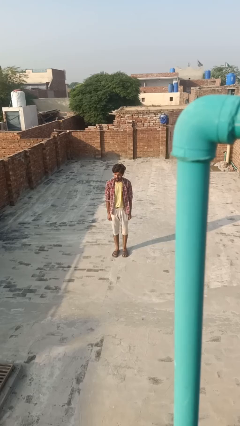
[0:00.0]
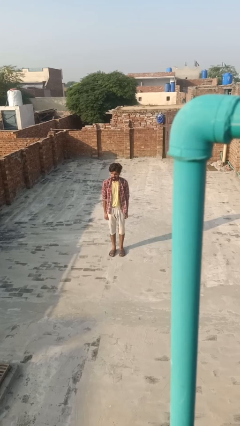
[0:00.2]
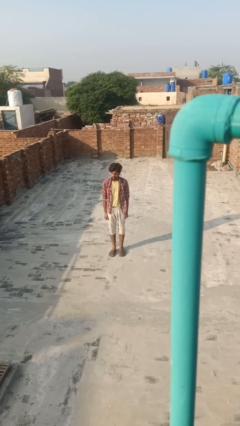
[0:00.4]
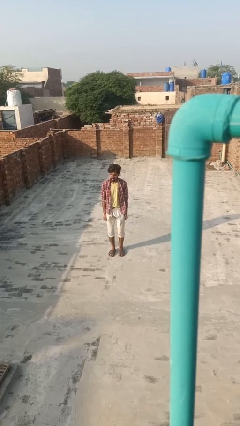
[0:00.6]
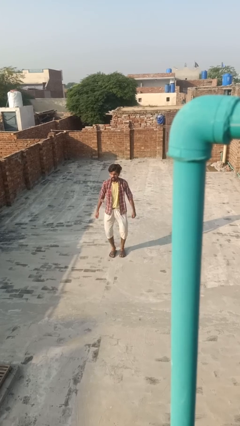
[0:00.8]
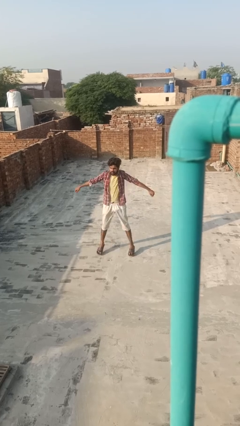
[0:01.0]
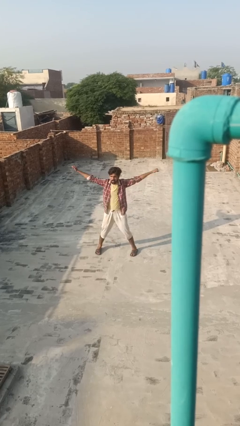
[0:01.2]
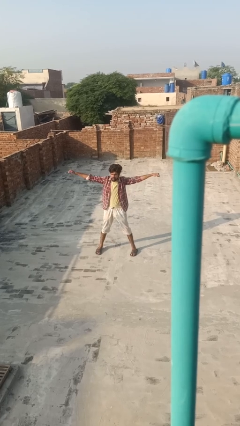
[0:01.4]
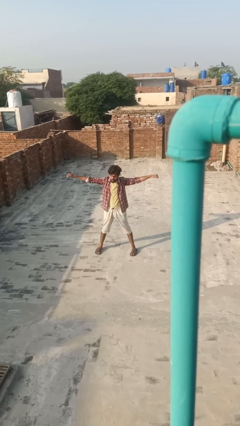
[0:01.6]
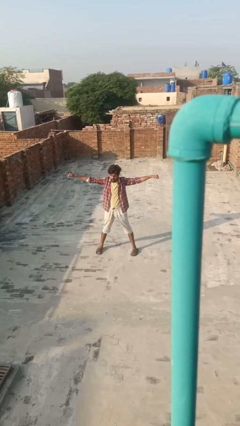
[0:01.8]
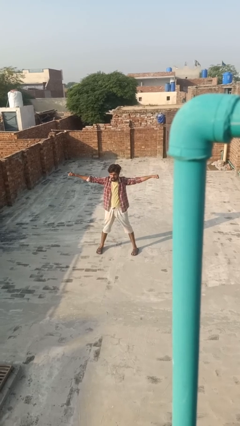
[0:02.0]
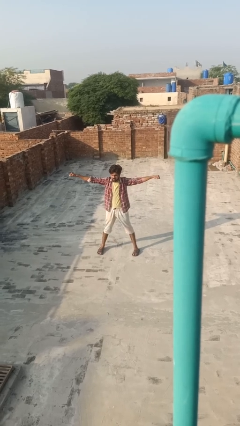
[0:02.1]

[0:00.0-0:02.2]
person exercises with jumping jacks

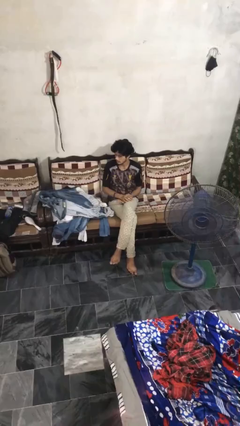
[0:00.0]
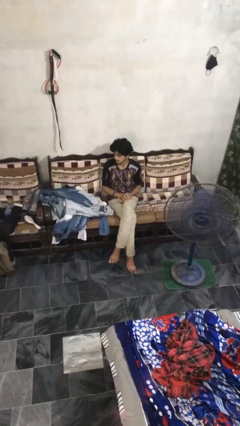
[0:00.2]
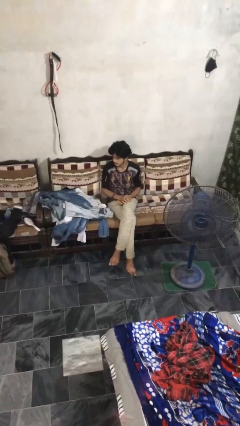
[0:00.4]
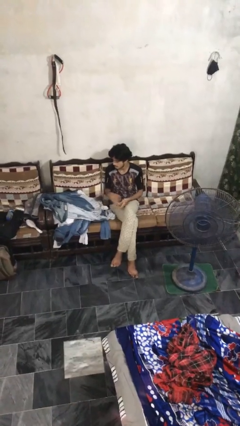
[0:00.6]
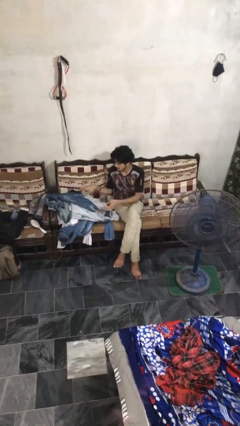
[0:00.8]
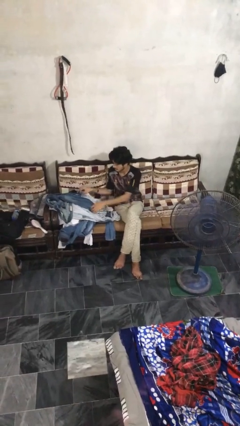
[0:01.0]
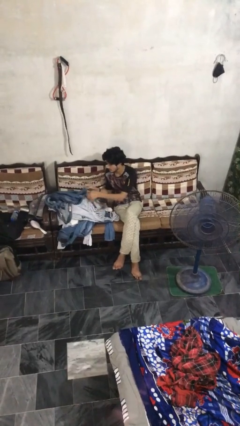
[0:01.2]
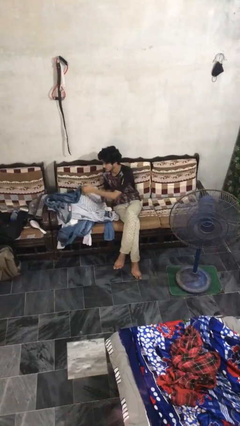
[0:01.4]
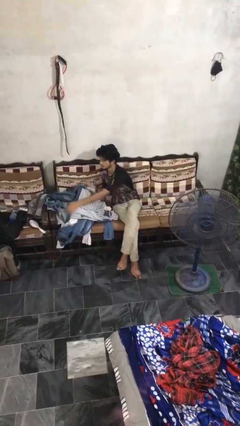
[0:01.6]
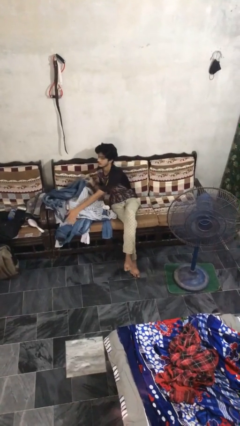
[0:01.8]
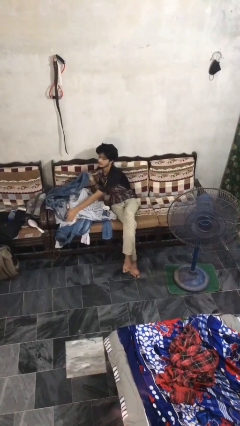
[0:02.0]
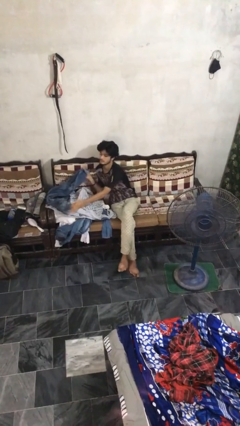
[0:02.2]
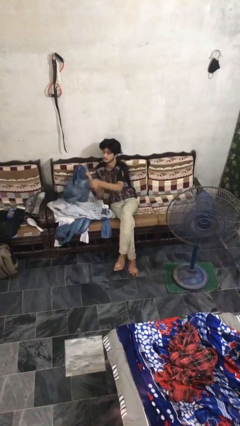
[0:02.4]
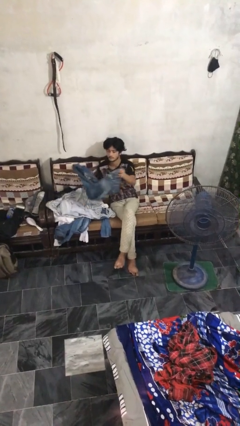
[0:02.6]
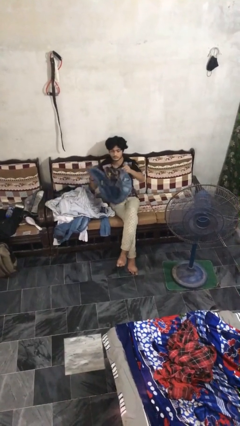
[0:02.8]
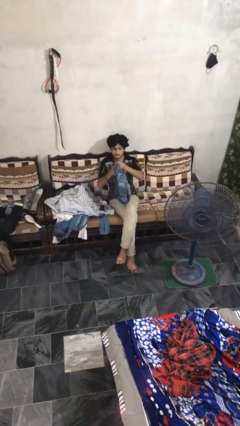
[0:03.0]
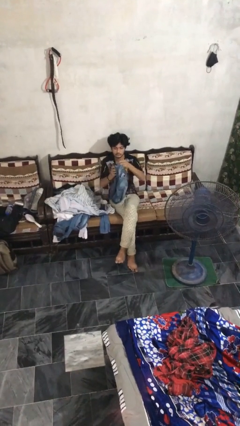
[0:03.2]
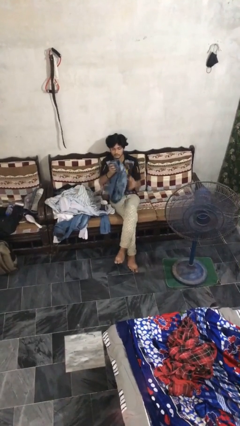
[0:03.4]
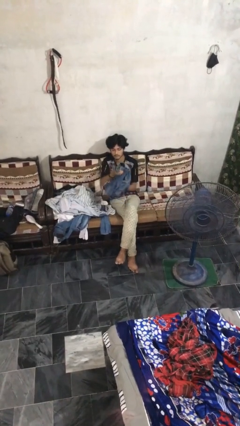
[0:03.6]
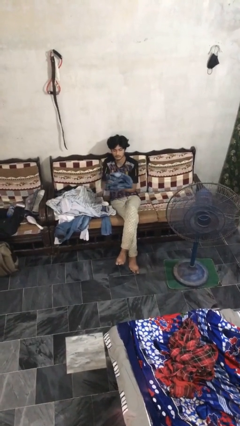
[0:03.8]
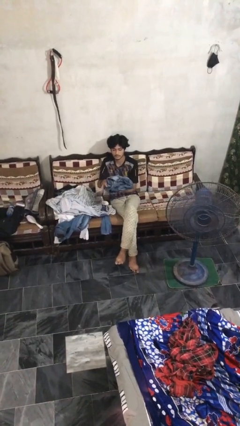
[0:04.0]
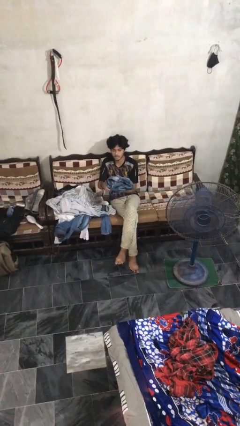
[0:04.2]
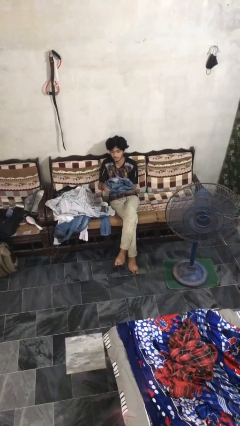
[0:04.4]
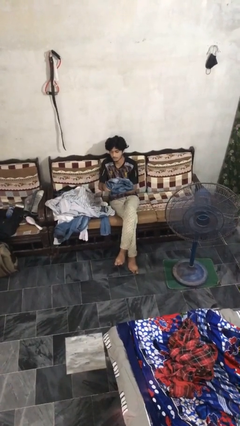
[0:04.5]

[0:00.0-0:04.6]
person folds pants

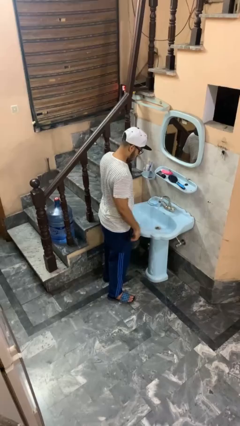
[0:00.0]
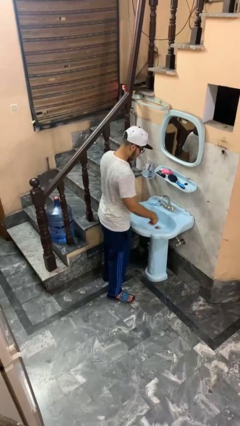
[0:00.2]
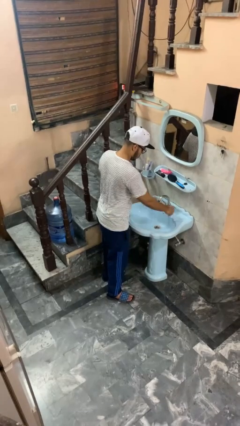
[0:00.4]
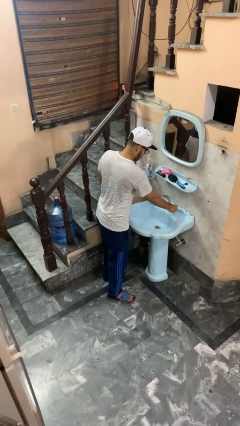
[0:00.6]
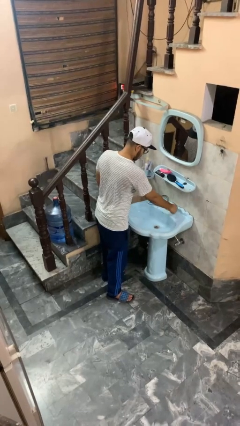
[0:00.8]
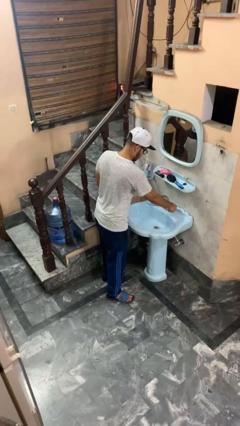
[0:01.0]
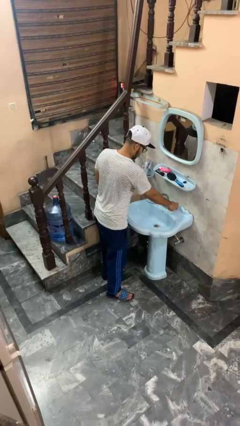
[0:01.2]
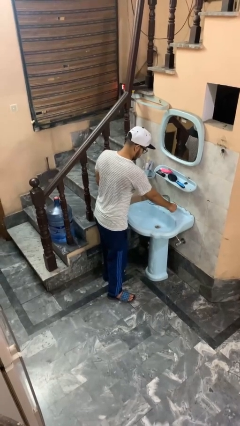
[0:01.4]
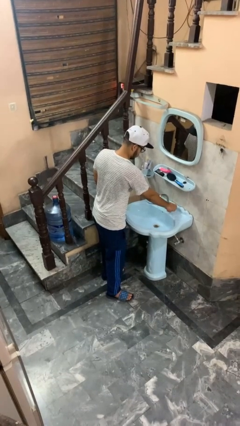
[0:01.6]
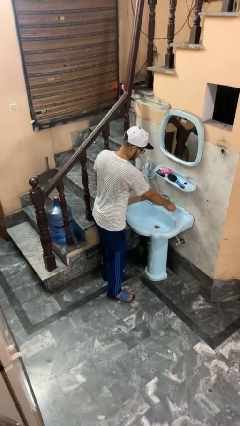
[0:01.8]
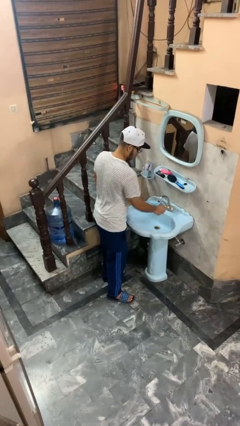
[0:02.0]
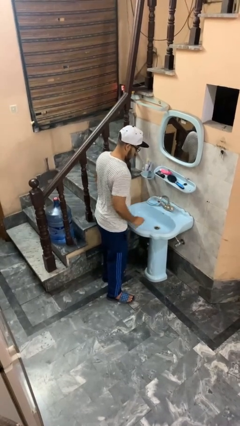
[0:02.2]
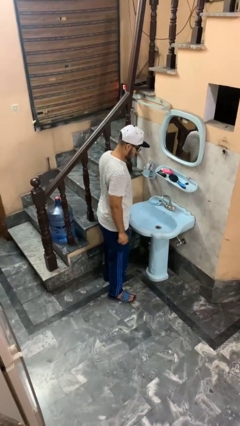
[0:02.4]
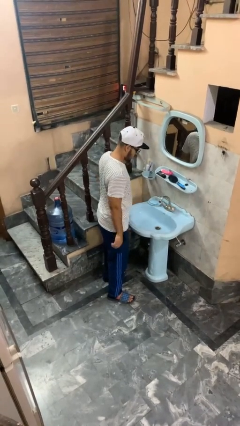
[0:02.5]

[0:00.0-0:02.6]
person turns off faucet

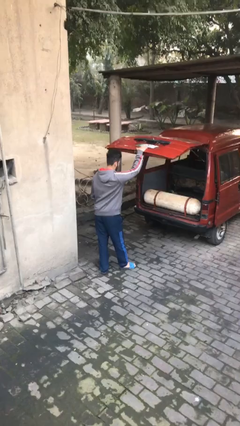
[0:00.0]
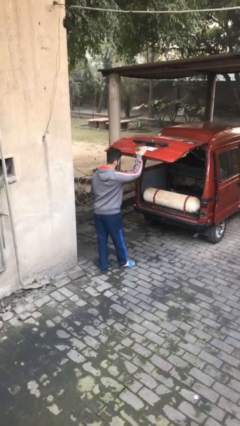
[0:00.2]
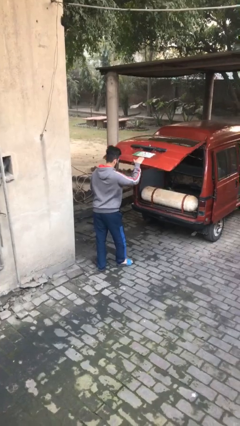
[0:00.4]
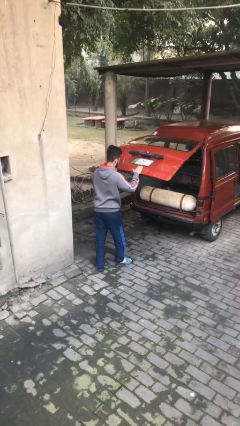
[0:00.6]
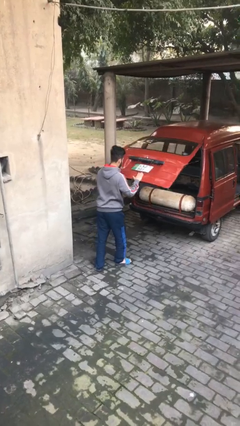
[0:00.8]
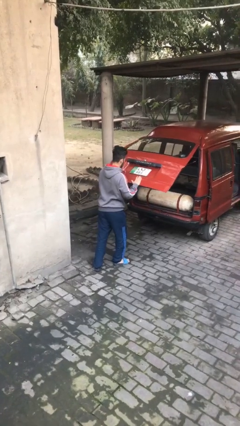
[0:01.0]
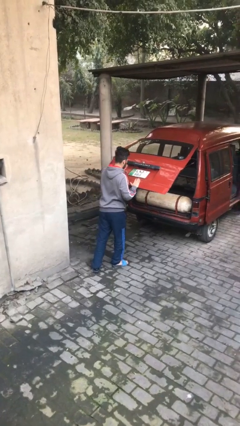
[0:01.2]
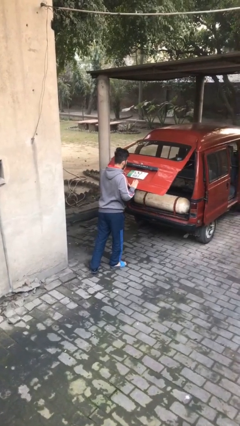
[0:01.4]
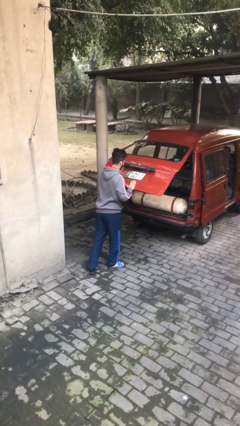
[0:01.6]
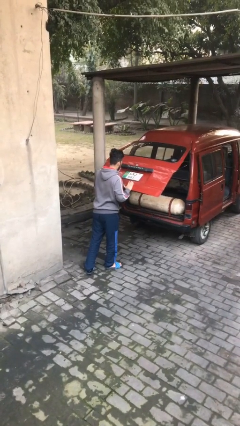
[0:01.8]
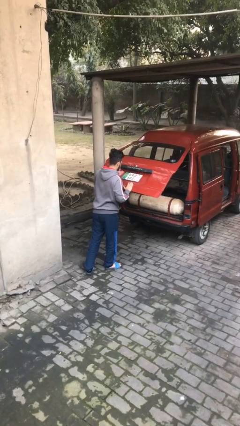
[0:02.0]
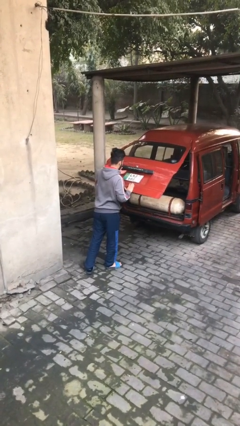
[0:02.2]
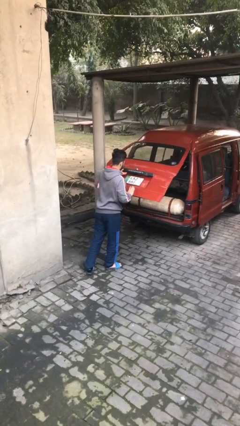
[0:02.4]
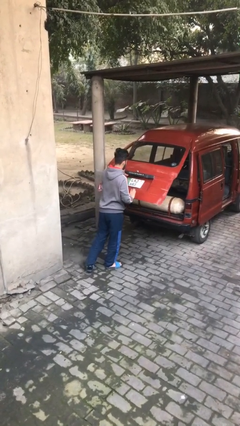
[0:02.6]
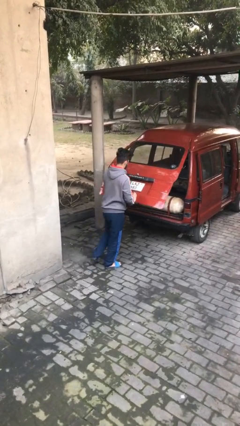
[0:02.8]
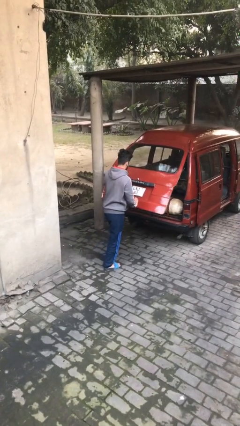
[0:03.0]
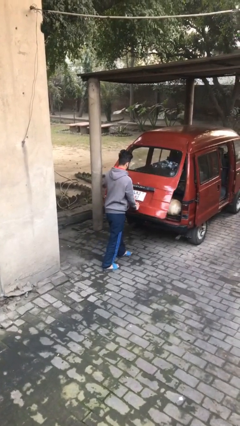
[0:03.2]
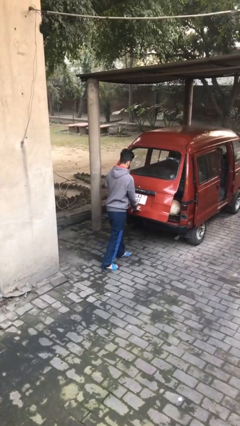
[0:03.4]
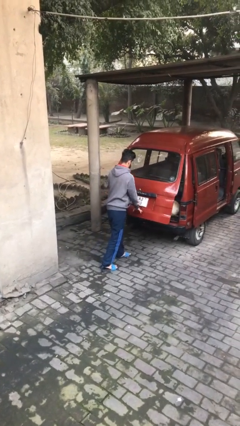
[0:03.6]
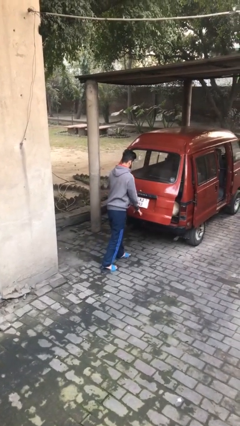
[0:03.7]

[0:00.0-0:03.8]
person closes car trunk

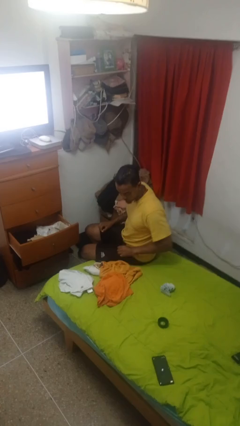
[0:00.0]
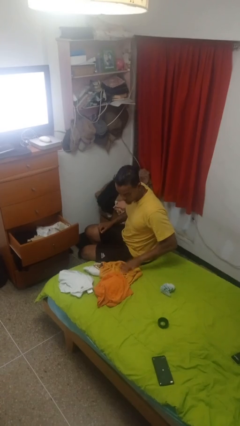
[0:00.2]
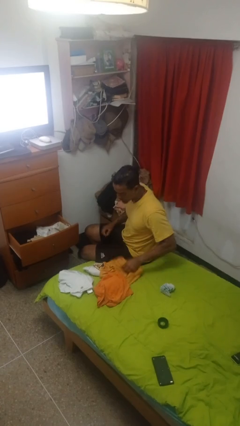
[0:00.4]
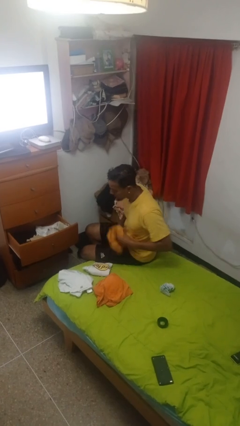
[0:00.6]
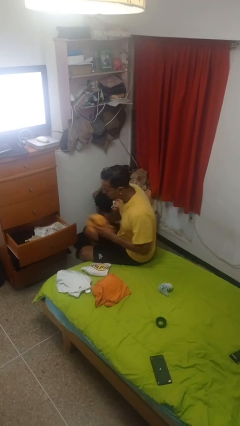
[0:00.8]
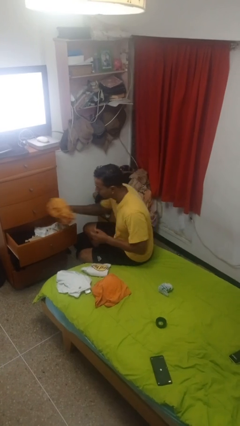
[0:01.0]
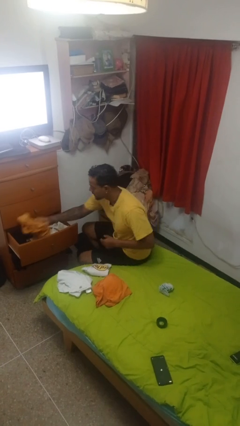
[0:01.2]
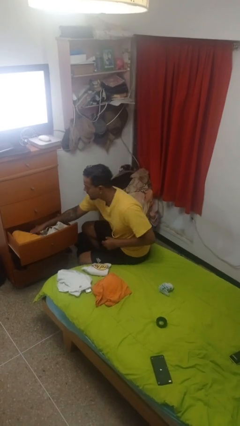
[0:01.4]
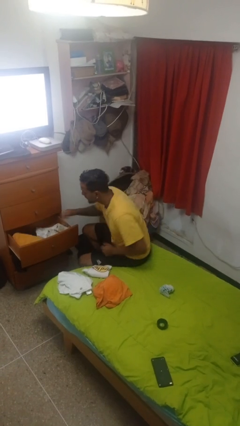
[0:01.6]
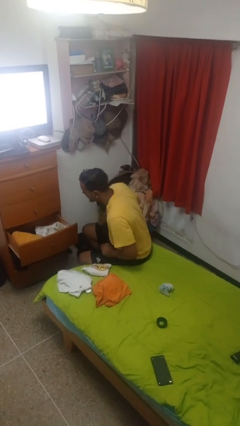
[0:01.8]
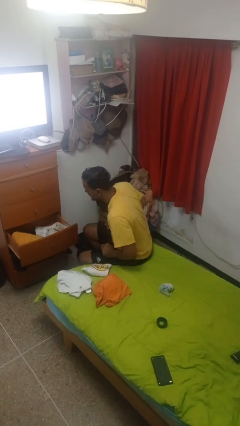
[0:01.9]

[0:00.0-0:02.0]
person puts clothes into dresser

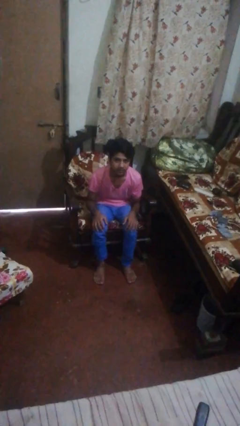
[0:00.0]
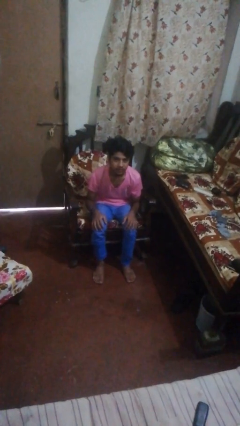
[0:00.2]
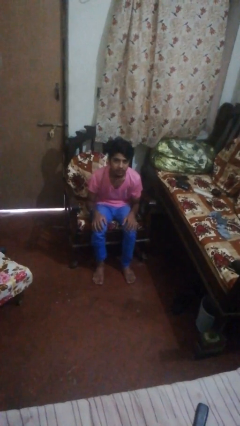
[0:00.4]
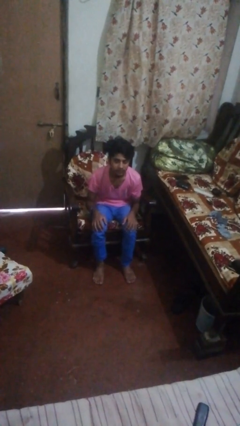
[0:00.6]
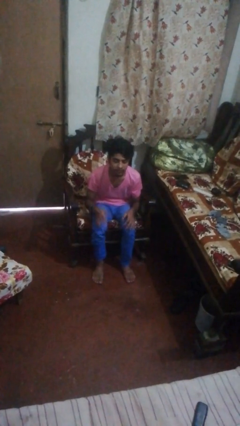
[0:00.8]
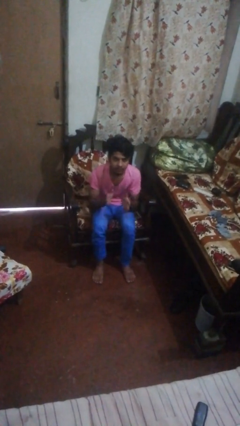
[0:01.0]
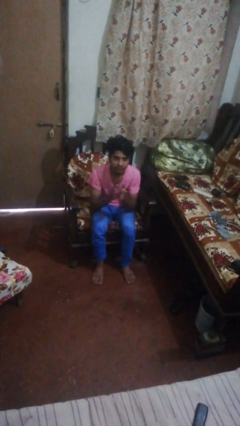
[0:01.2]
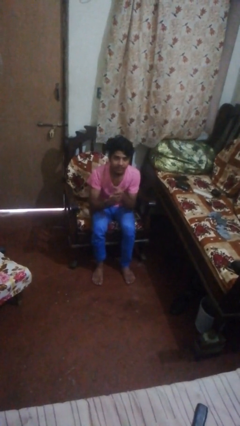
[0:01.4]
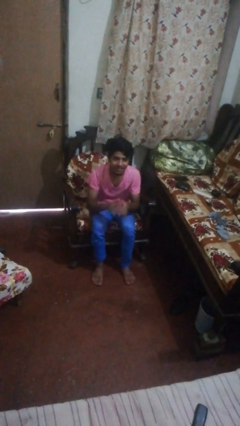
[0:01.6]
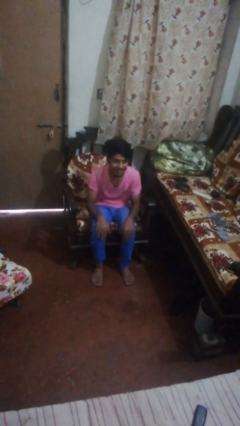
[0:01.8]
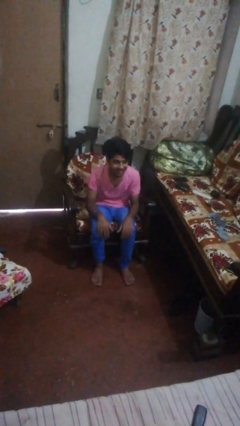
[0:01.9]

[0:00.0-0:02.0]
person claps hands
